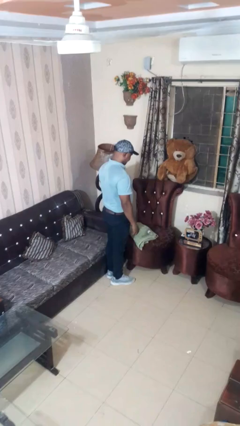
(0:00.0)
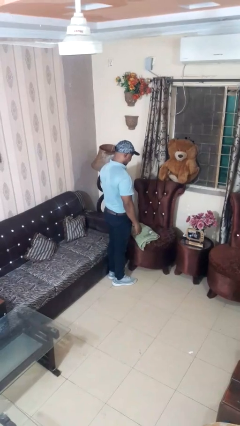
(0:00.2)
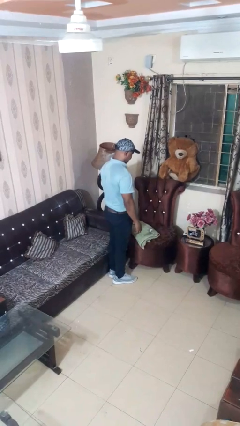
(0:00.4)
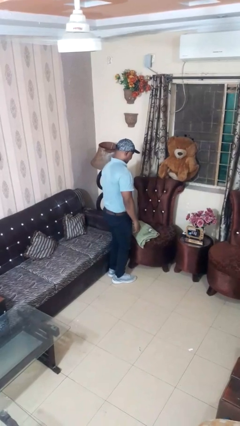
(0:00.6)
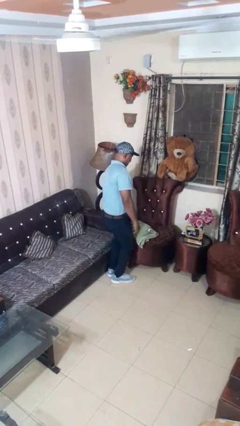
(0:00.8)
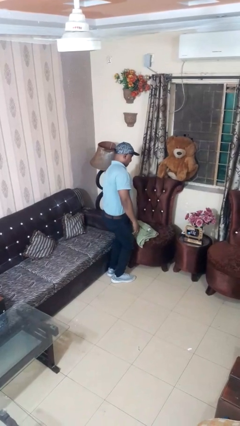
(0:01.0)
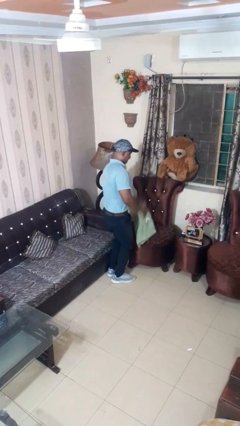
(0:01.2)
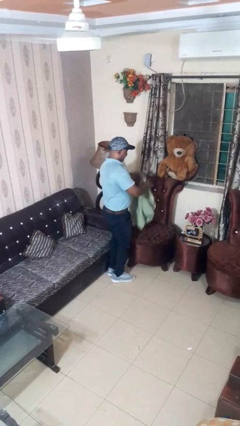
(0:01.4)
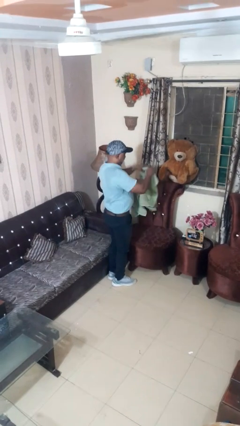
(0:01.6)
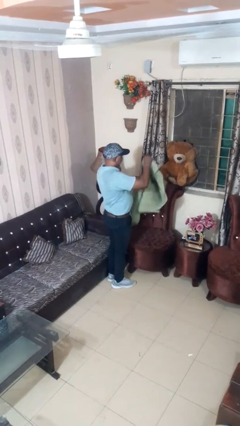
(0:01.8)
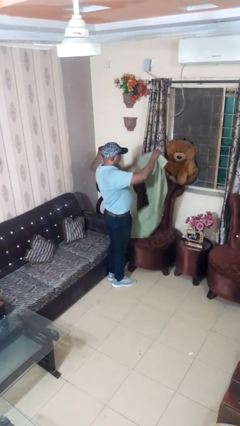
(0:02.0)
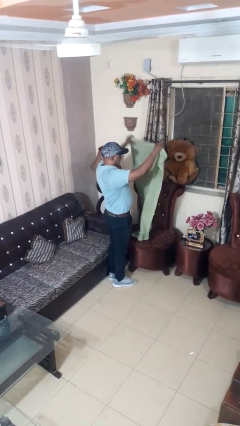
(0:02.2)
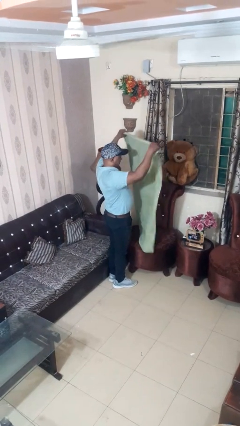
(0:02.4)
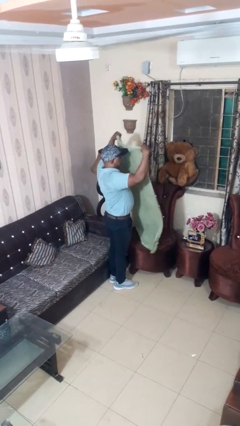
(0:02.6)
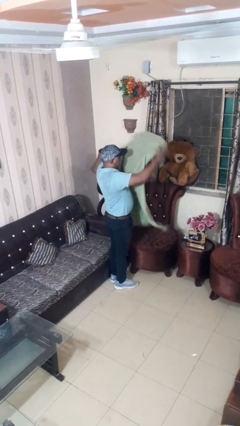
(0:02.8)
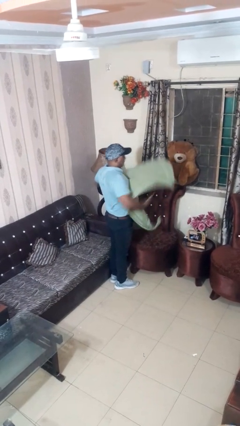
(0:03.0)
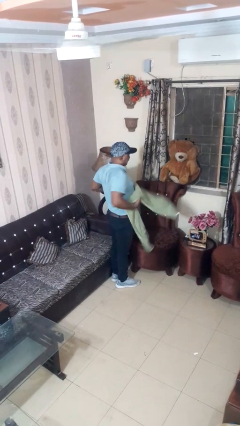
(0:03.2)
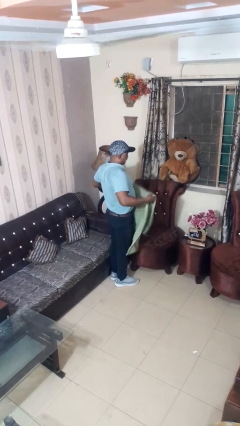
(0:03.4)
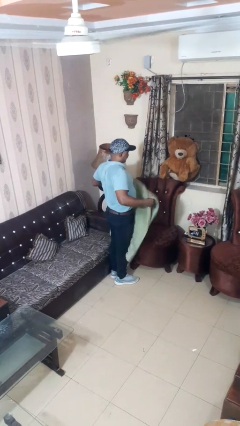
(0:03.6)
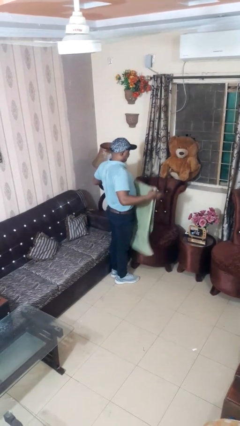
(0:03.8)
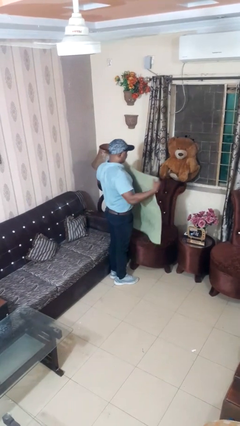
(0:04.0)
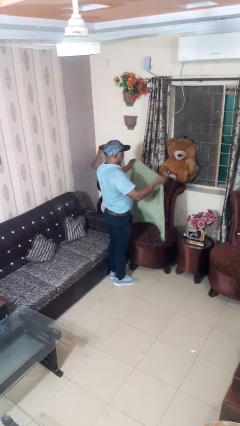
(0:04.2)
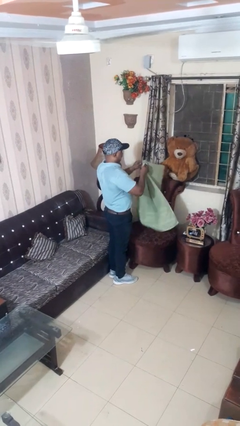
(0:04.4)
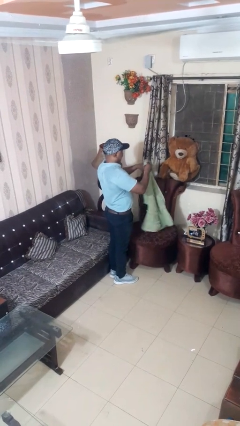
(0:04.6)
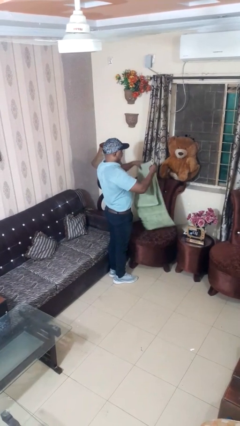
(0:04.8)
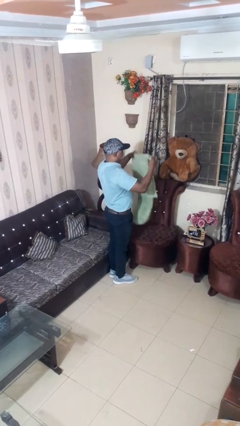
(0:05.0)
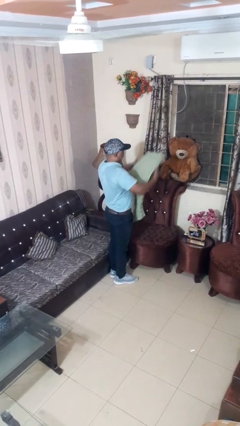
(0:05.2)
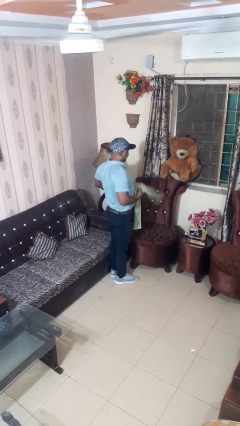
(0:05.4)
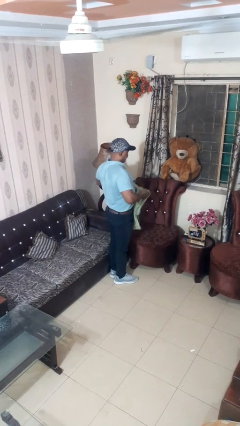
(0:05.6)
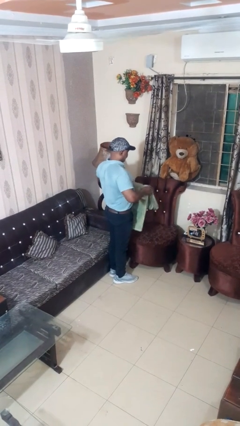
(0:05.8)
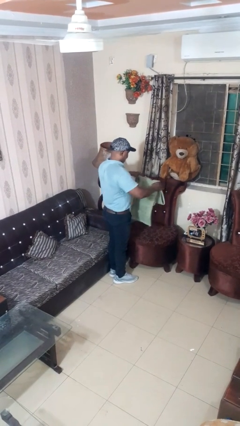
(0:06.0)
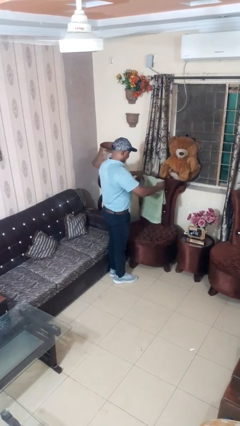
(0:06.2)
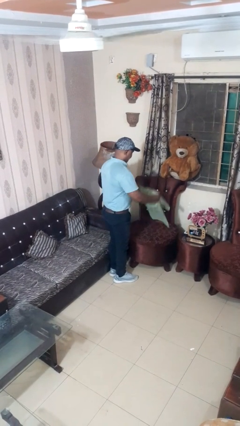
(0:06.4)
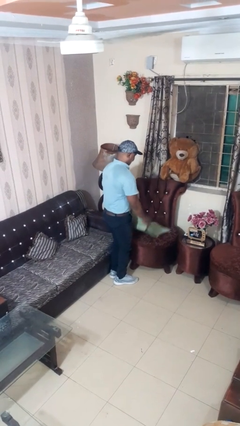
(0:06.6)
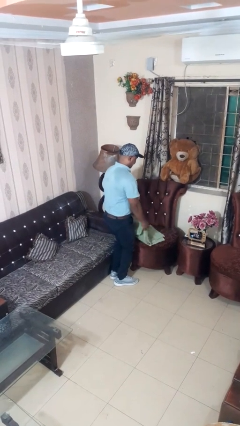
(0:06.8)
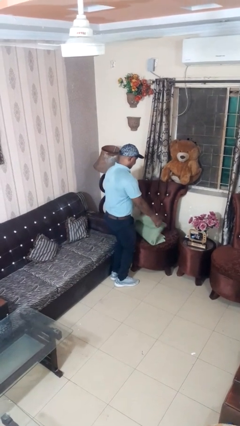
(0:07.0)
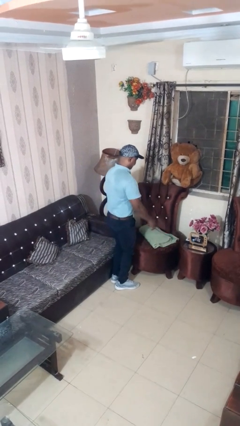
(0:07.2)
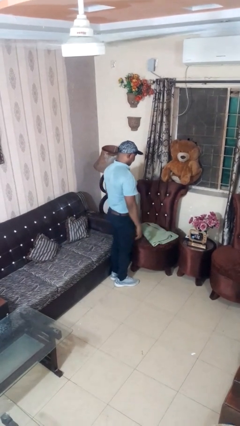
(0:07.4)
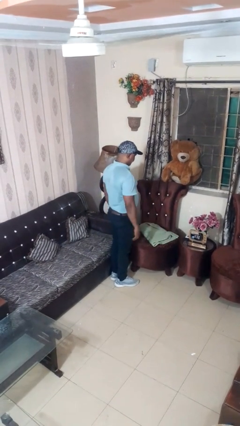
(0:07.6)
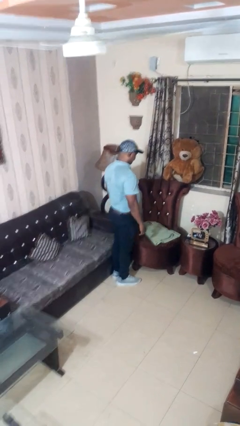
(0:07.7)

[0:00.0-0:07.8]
person folds towel

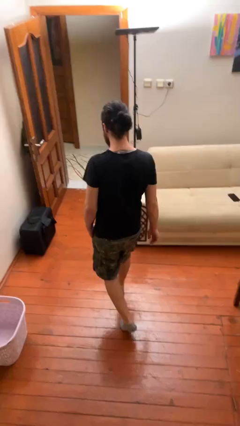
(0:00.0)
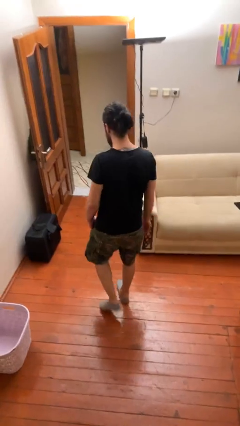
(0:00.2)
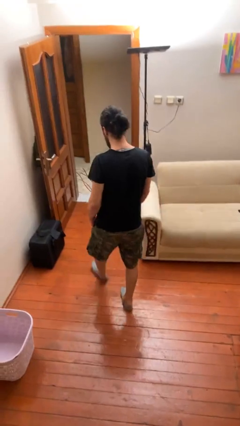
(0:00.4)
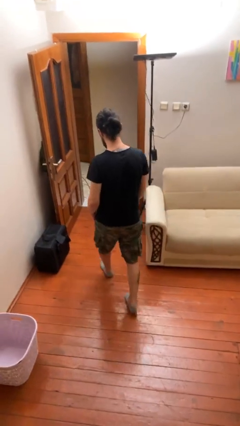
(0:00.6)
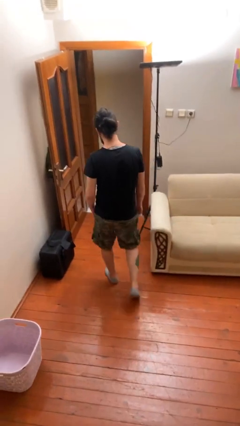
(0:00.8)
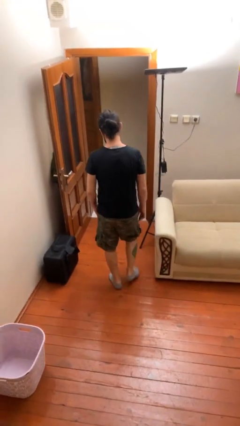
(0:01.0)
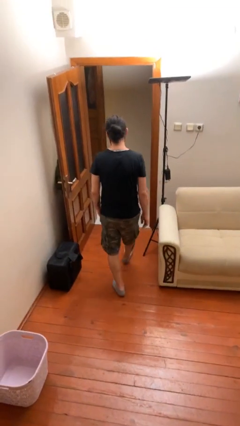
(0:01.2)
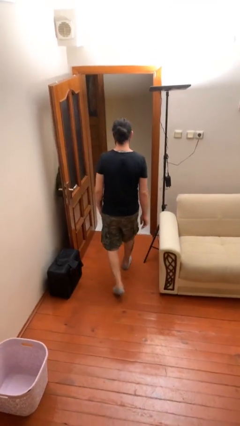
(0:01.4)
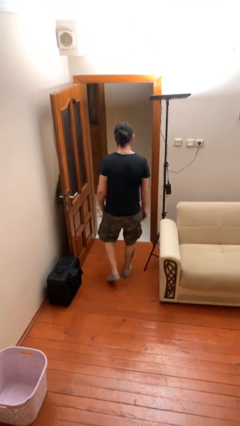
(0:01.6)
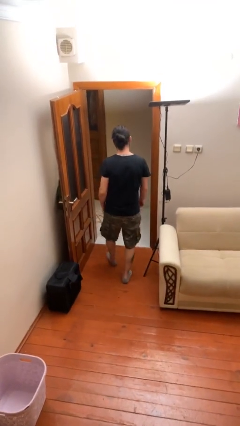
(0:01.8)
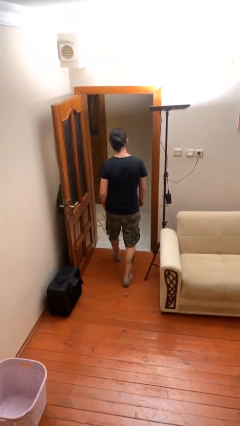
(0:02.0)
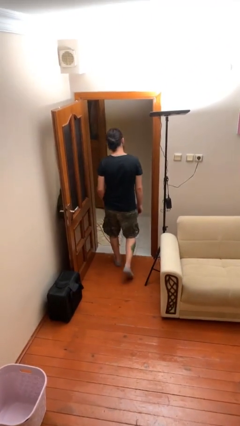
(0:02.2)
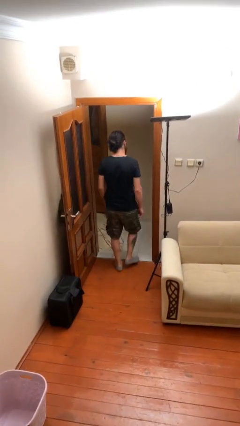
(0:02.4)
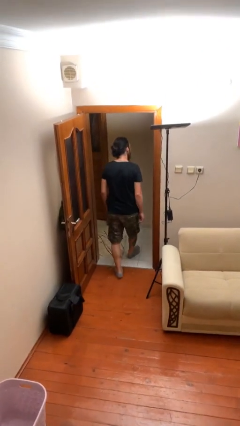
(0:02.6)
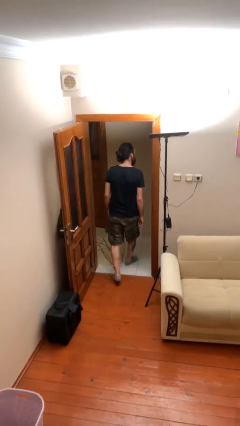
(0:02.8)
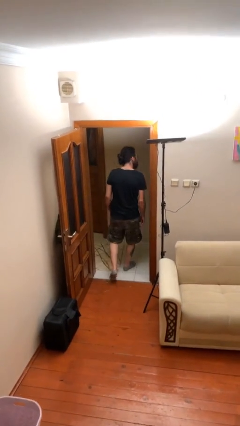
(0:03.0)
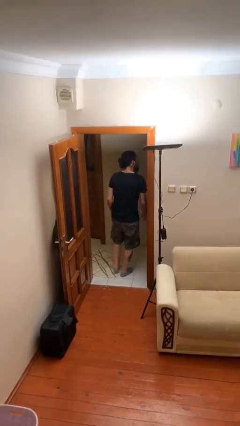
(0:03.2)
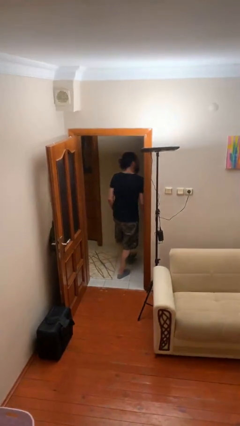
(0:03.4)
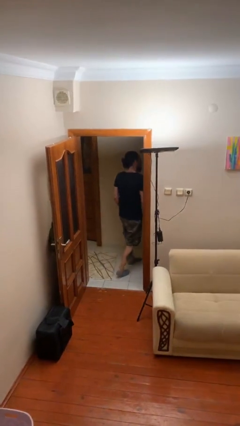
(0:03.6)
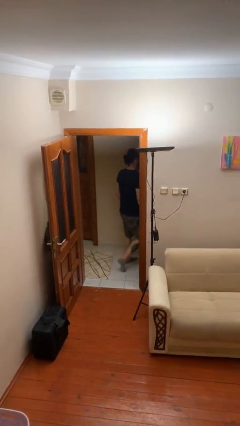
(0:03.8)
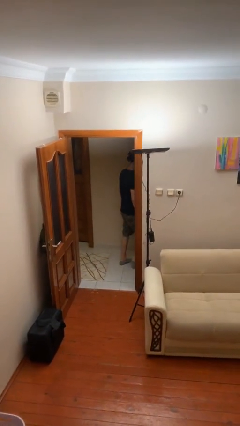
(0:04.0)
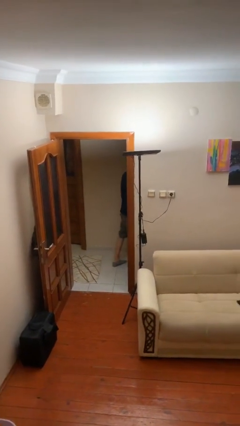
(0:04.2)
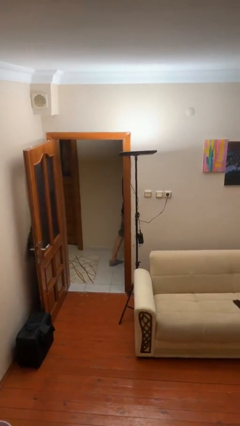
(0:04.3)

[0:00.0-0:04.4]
person exits scene through structure

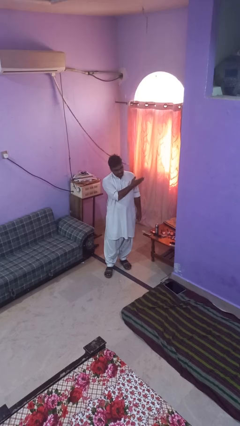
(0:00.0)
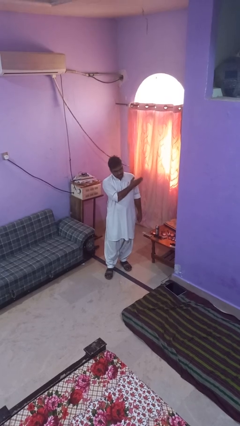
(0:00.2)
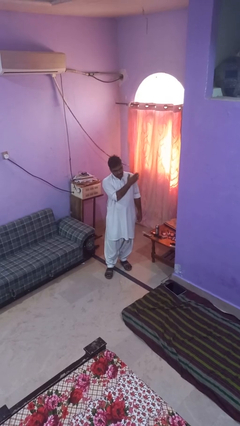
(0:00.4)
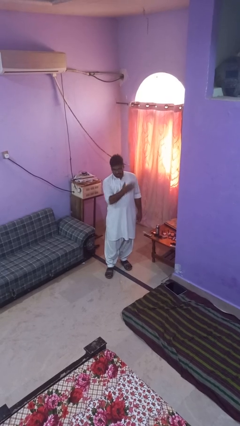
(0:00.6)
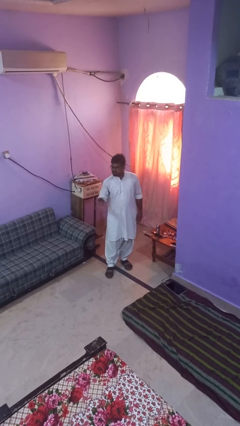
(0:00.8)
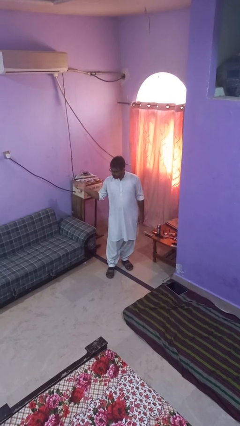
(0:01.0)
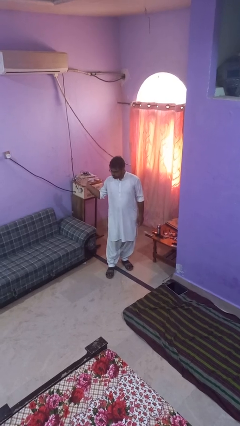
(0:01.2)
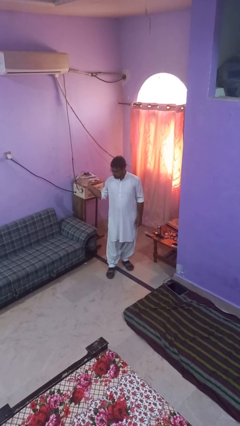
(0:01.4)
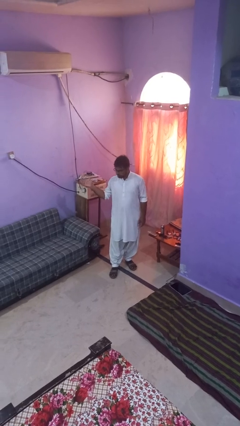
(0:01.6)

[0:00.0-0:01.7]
person gestures swipe right

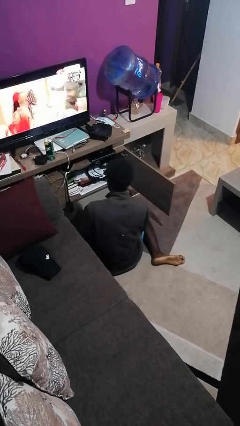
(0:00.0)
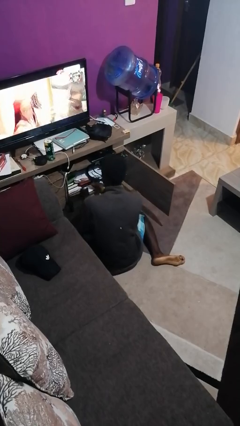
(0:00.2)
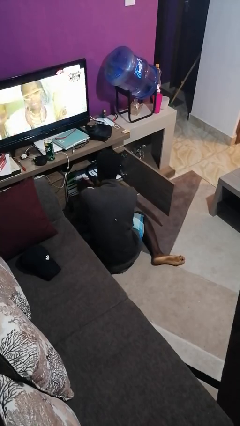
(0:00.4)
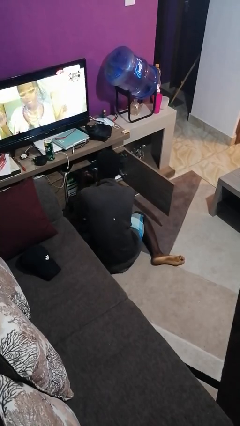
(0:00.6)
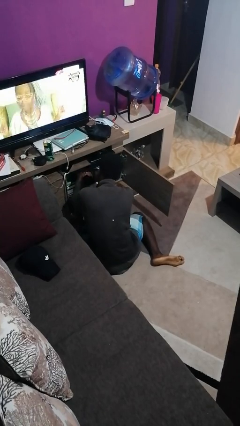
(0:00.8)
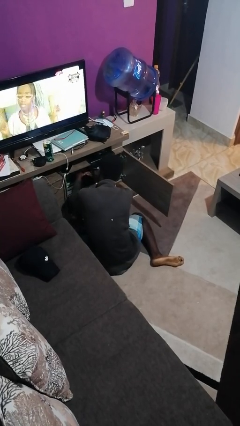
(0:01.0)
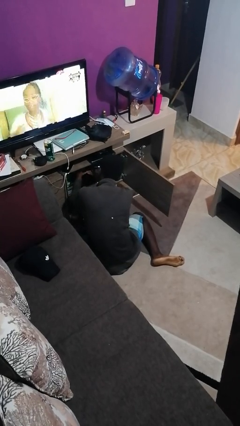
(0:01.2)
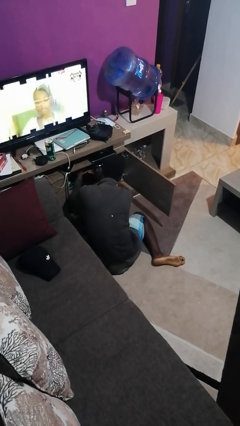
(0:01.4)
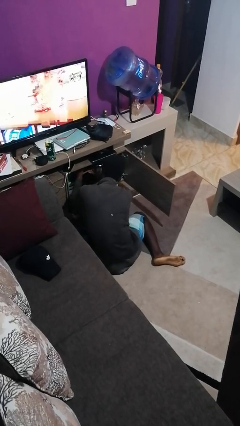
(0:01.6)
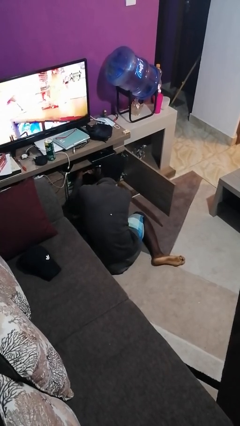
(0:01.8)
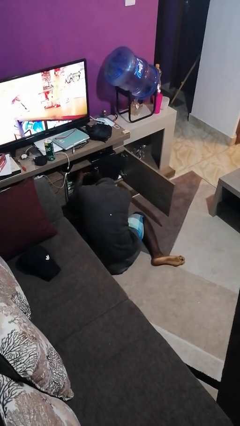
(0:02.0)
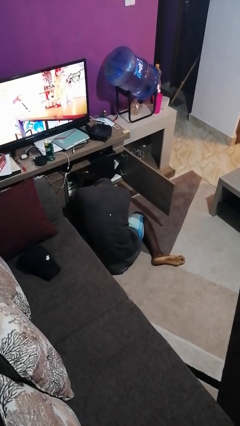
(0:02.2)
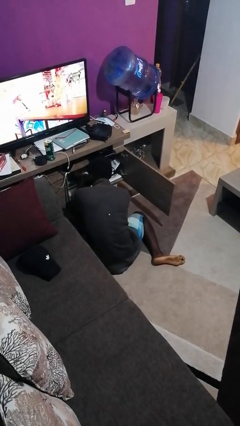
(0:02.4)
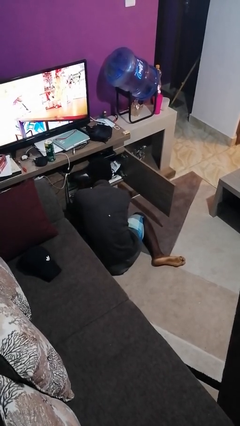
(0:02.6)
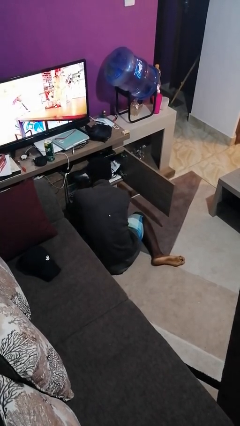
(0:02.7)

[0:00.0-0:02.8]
person searches in cabinet

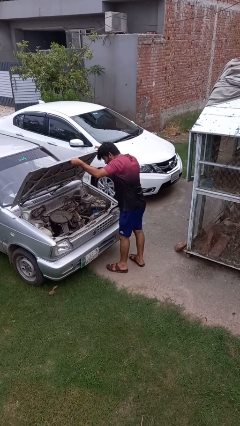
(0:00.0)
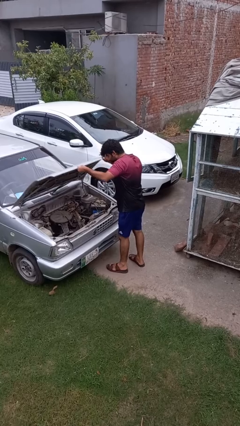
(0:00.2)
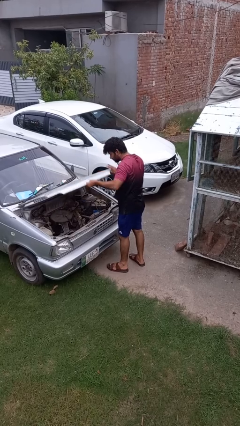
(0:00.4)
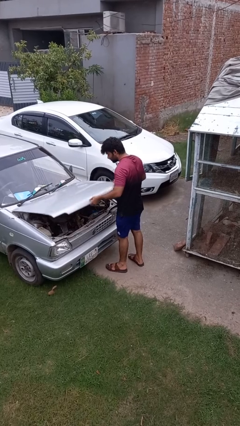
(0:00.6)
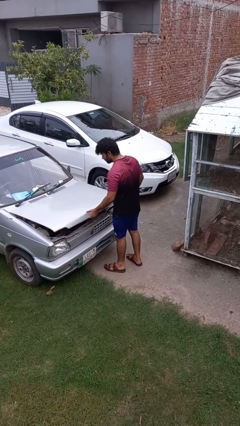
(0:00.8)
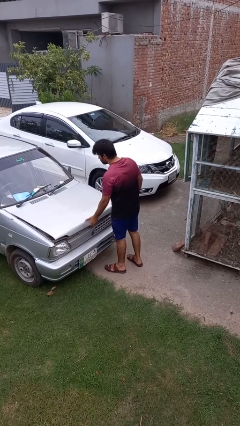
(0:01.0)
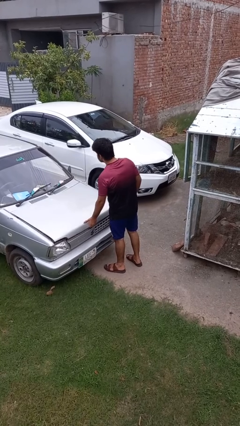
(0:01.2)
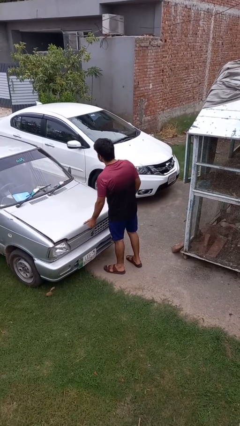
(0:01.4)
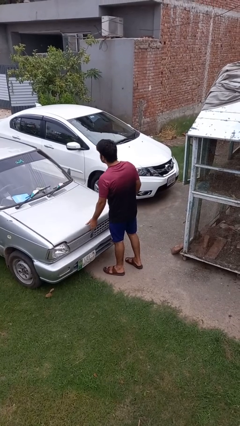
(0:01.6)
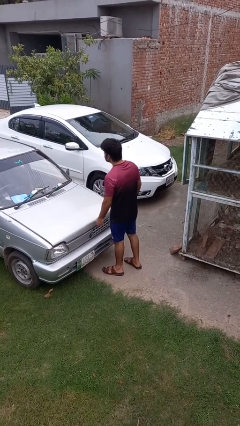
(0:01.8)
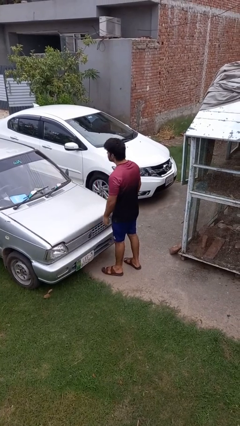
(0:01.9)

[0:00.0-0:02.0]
person closes car hood
